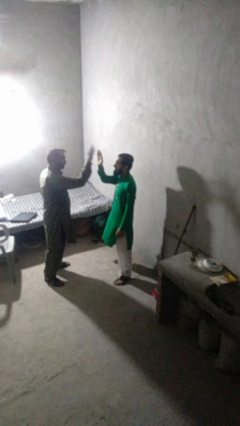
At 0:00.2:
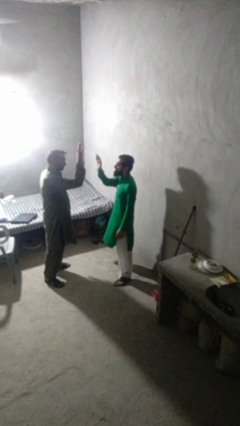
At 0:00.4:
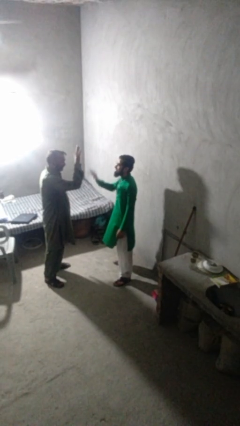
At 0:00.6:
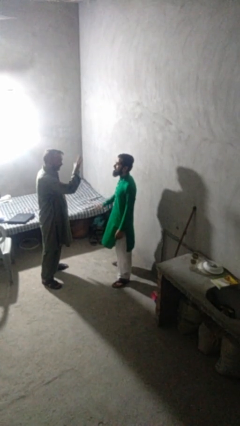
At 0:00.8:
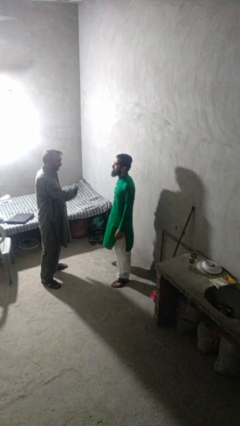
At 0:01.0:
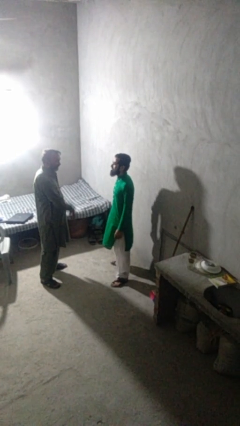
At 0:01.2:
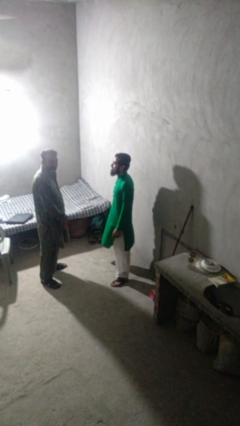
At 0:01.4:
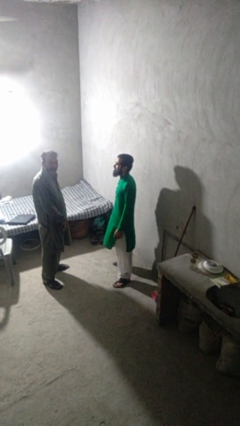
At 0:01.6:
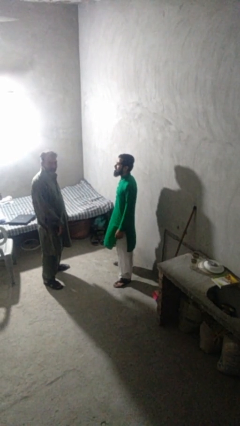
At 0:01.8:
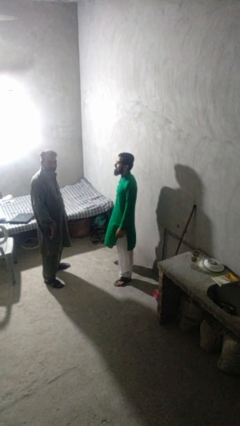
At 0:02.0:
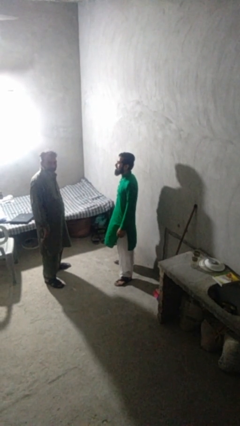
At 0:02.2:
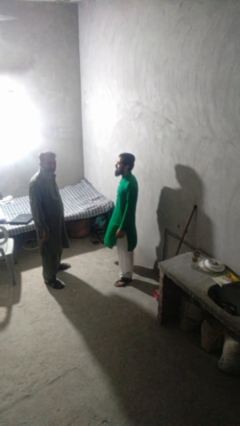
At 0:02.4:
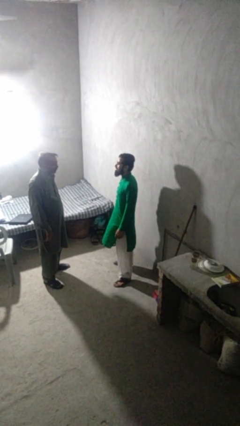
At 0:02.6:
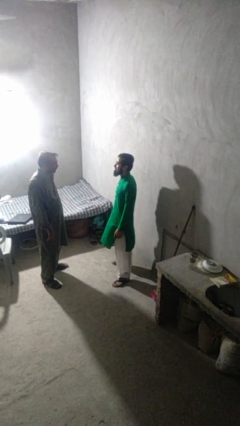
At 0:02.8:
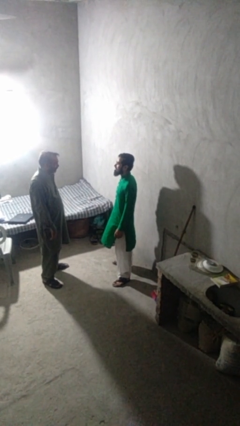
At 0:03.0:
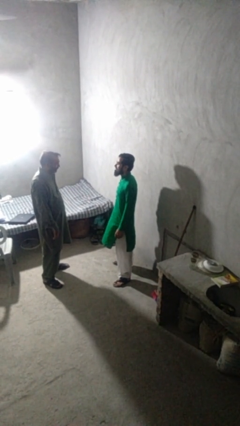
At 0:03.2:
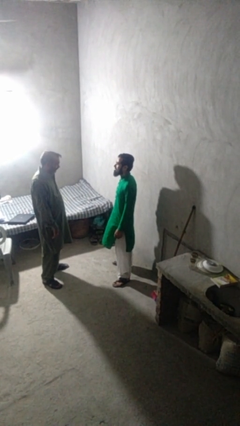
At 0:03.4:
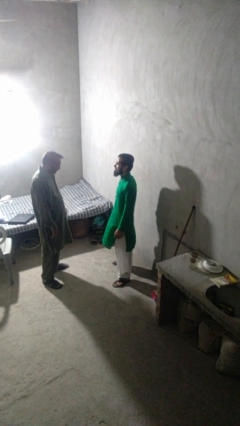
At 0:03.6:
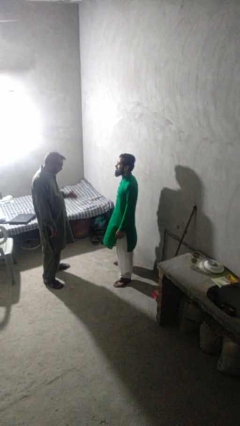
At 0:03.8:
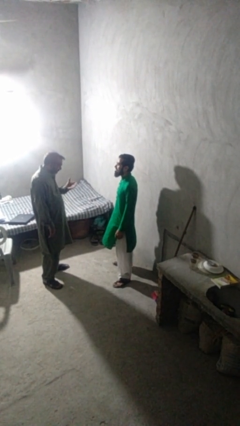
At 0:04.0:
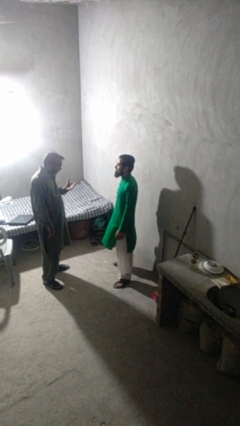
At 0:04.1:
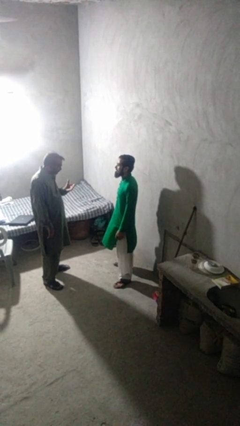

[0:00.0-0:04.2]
person highfives hand

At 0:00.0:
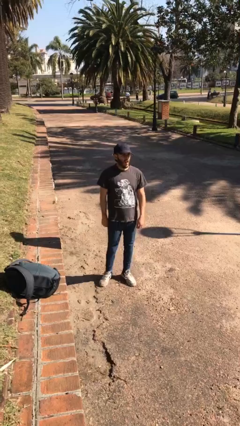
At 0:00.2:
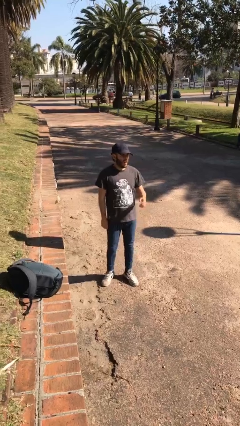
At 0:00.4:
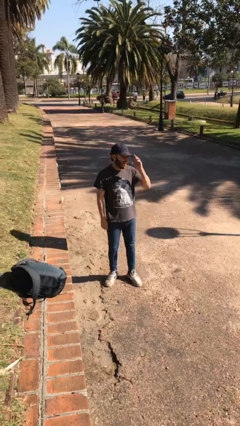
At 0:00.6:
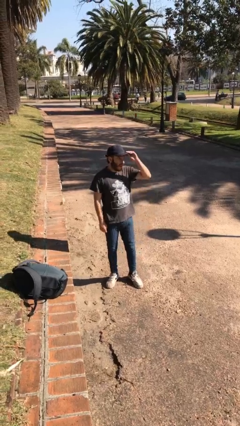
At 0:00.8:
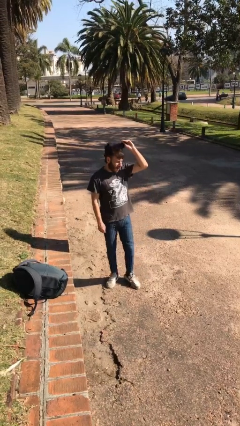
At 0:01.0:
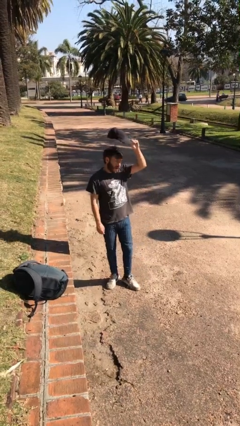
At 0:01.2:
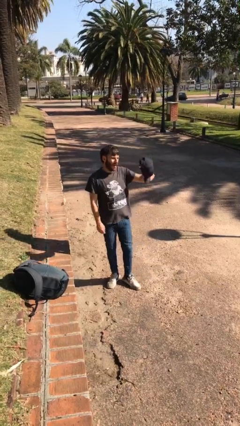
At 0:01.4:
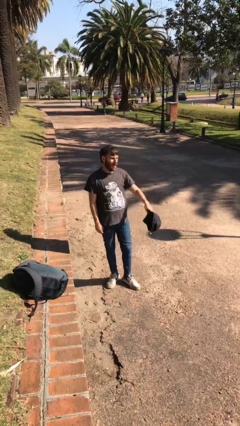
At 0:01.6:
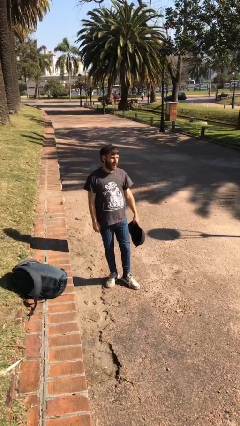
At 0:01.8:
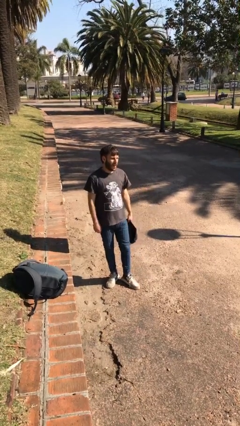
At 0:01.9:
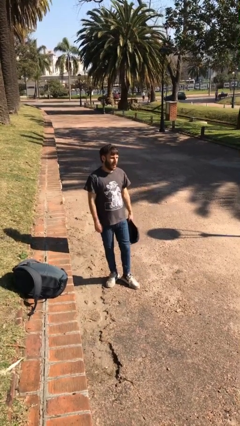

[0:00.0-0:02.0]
person takes off hat

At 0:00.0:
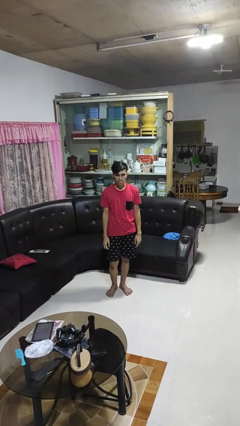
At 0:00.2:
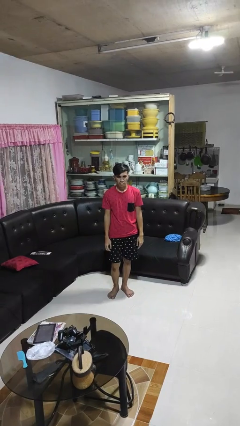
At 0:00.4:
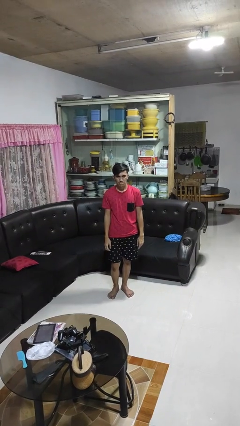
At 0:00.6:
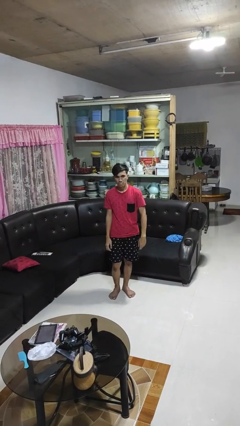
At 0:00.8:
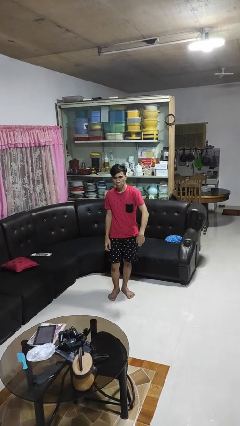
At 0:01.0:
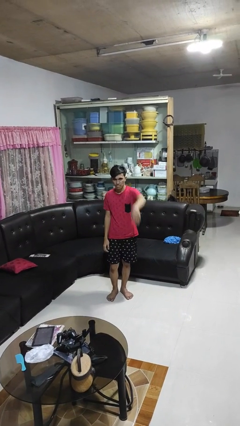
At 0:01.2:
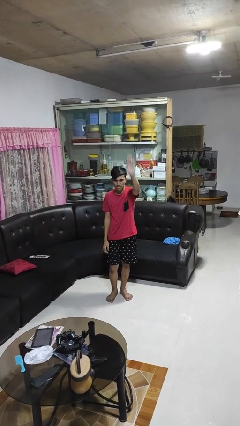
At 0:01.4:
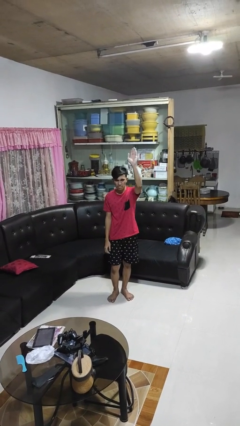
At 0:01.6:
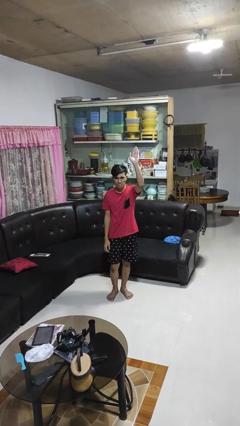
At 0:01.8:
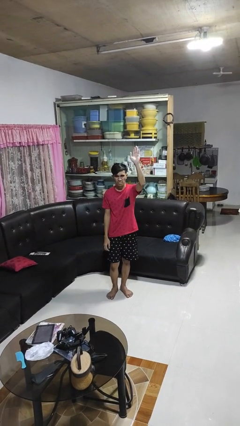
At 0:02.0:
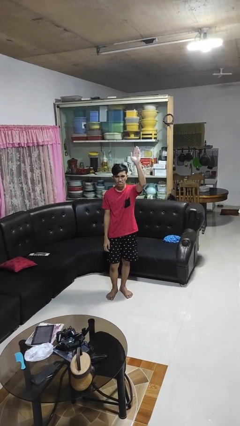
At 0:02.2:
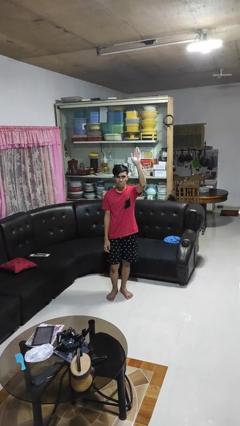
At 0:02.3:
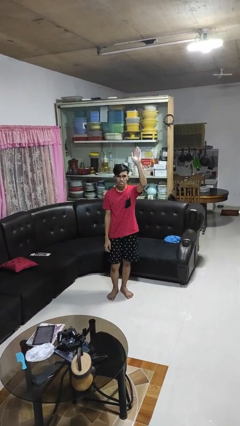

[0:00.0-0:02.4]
person gestures swipe up

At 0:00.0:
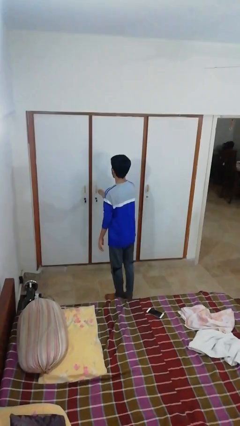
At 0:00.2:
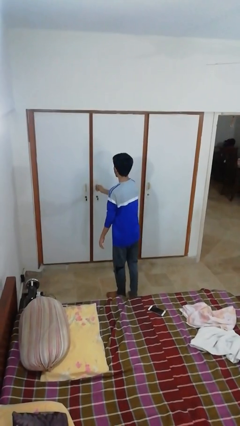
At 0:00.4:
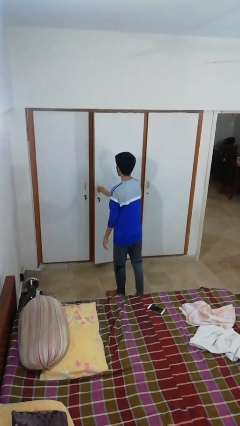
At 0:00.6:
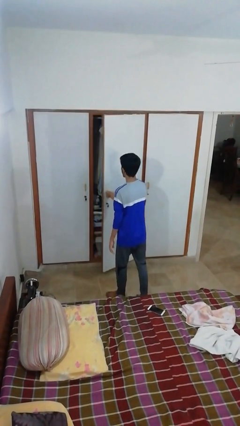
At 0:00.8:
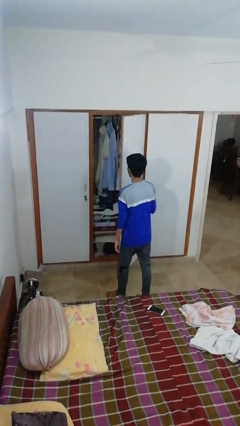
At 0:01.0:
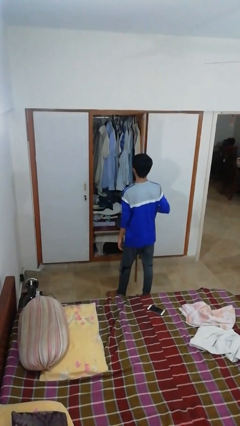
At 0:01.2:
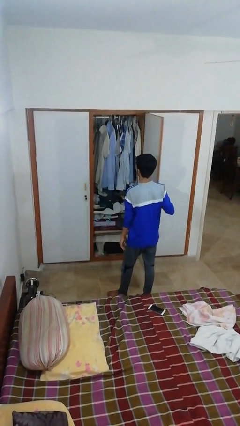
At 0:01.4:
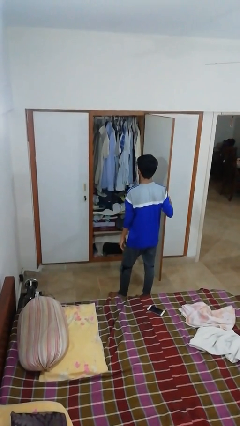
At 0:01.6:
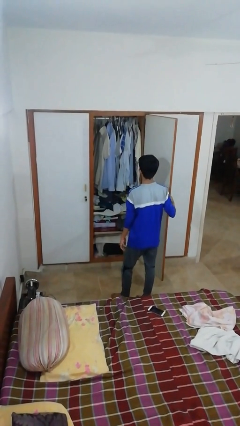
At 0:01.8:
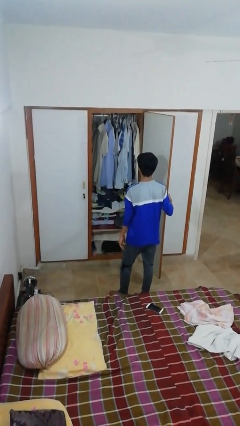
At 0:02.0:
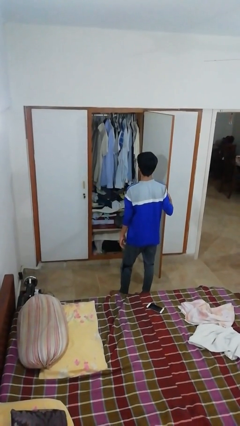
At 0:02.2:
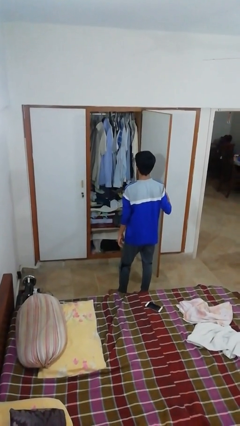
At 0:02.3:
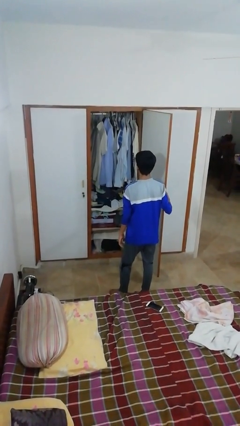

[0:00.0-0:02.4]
person opens closet door

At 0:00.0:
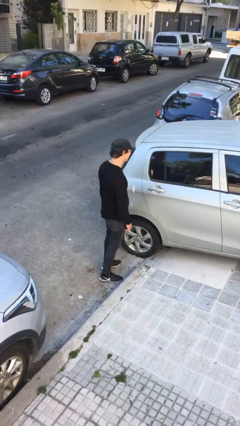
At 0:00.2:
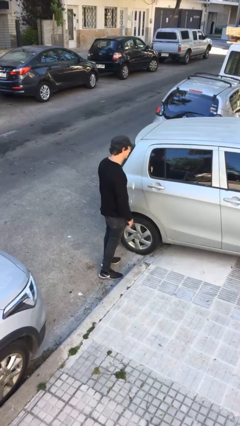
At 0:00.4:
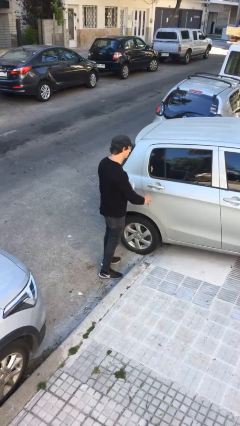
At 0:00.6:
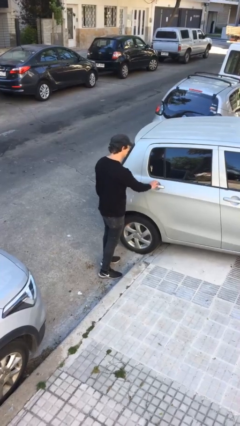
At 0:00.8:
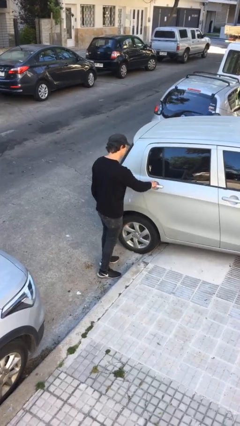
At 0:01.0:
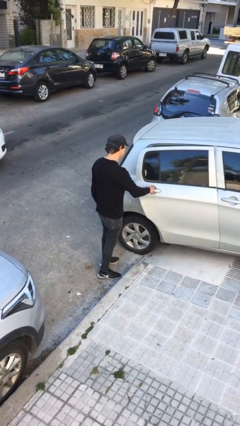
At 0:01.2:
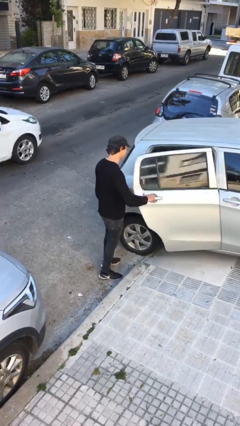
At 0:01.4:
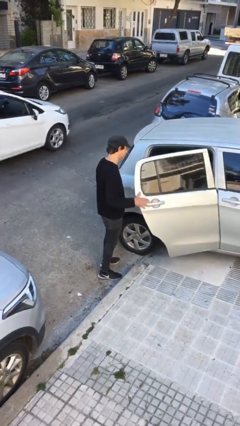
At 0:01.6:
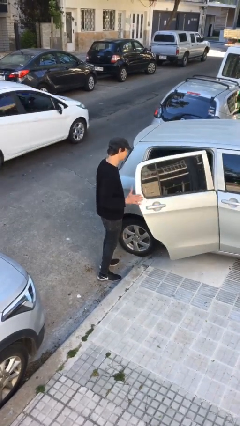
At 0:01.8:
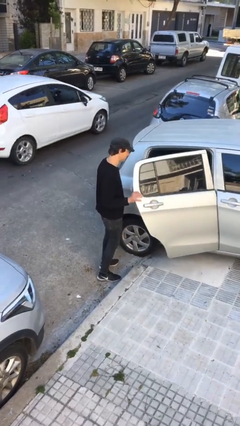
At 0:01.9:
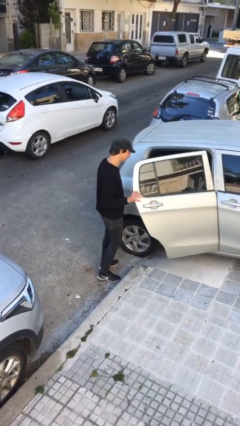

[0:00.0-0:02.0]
person opens car door

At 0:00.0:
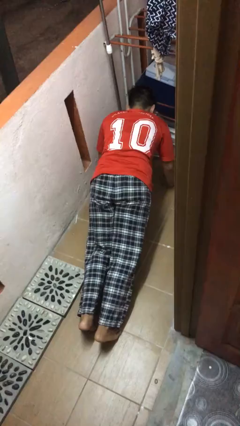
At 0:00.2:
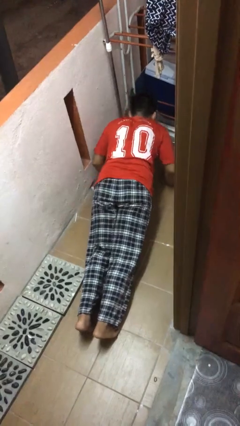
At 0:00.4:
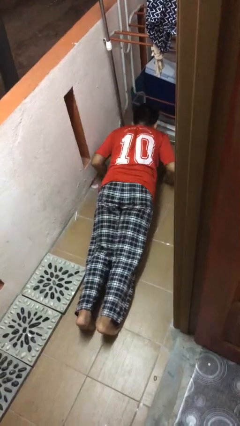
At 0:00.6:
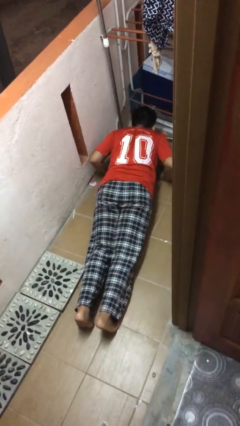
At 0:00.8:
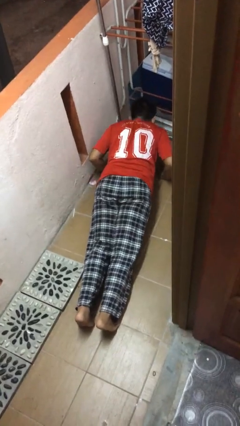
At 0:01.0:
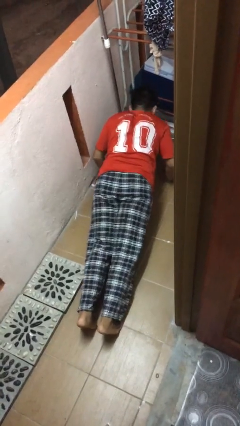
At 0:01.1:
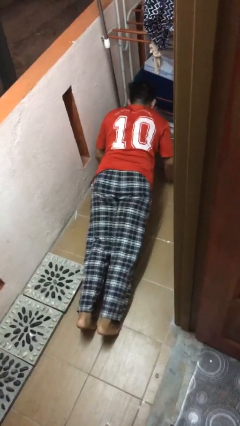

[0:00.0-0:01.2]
person exercises with pushup

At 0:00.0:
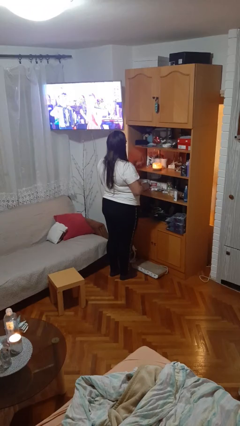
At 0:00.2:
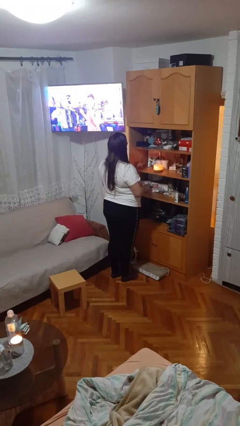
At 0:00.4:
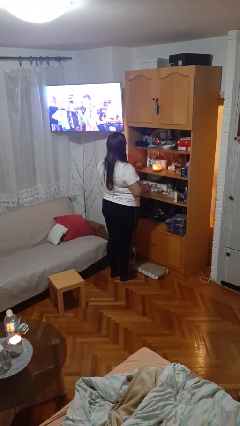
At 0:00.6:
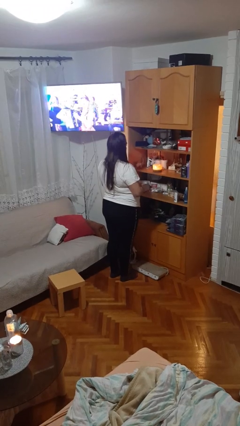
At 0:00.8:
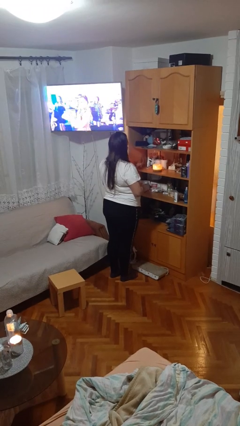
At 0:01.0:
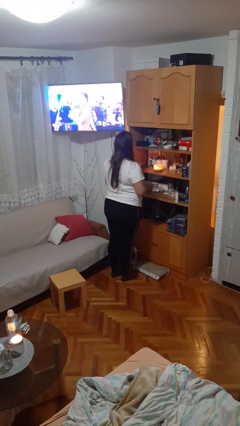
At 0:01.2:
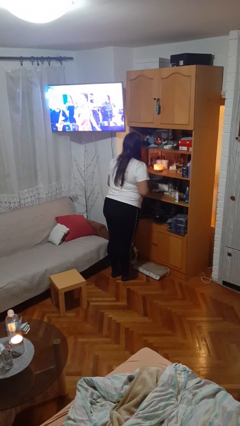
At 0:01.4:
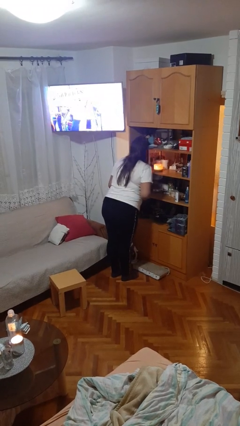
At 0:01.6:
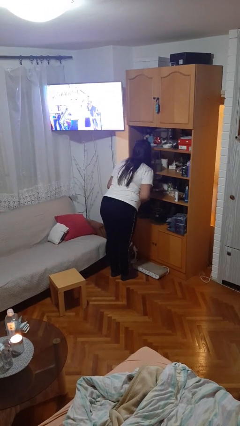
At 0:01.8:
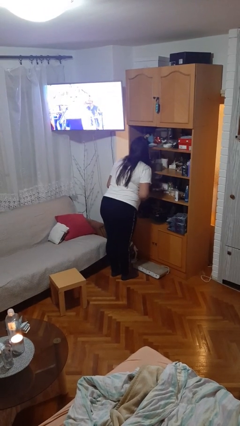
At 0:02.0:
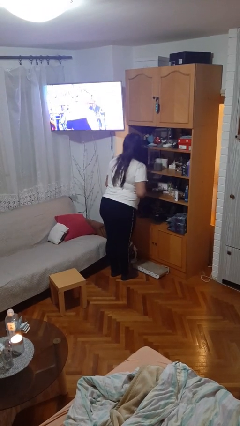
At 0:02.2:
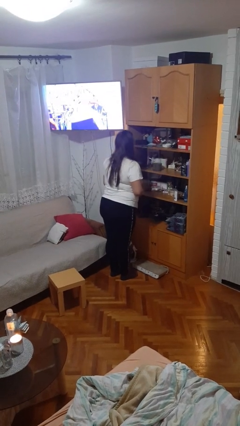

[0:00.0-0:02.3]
person extinguishes candle

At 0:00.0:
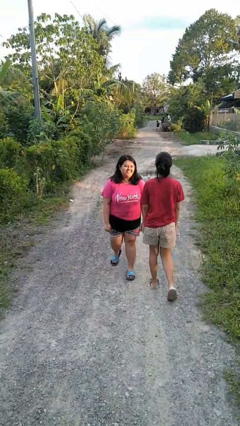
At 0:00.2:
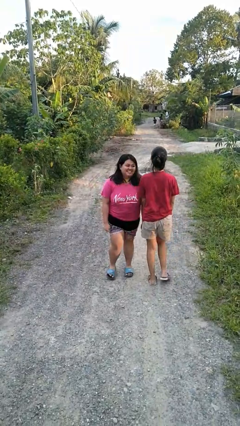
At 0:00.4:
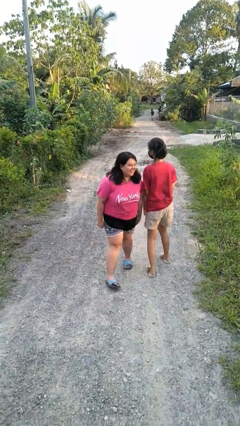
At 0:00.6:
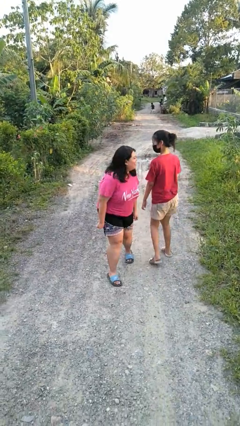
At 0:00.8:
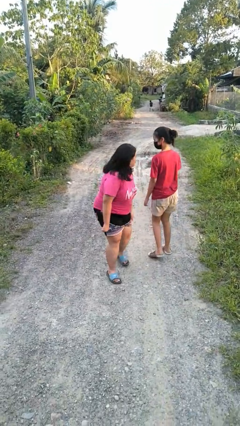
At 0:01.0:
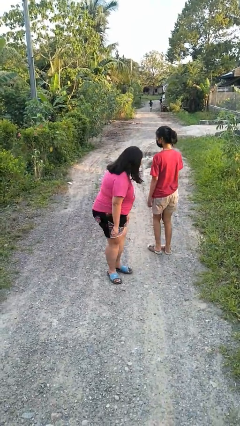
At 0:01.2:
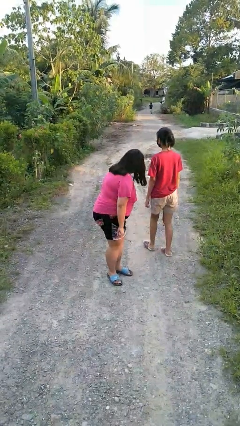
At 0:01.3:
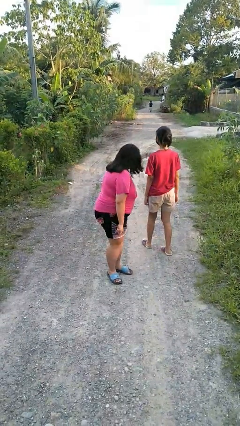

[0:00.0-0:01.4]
person bumps into person
